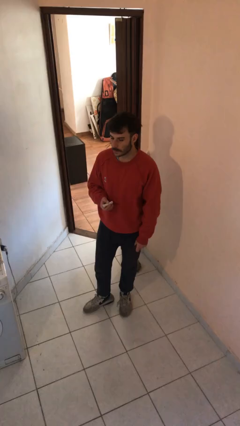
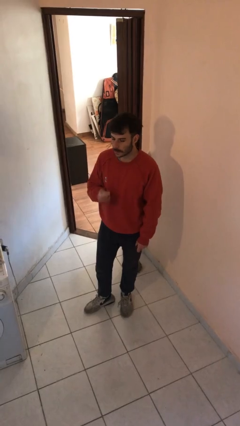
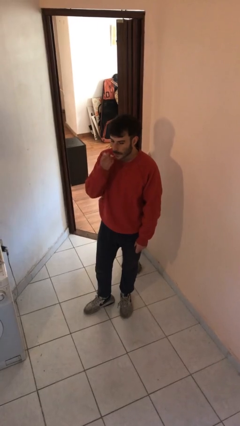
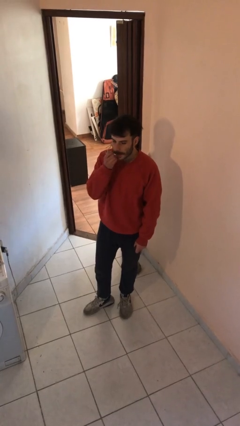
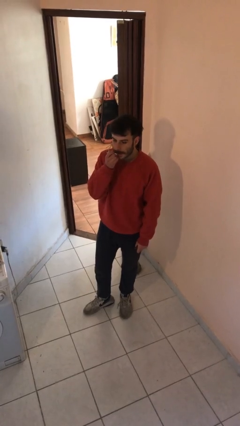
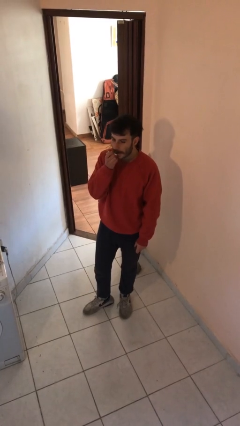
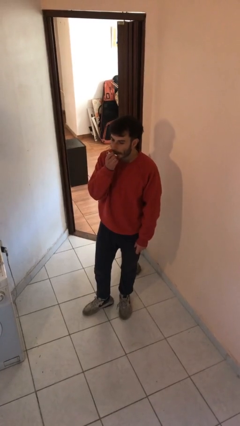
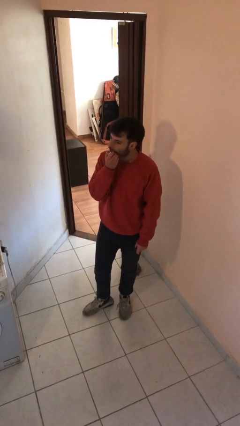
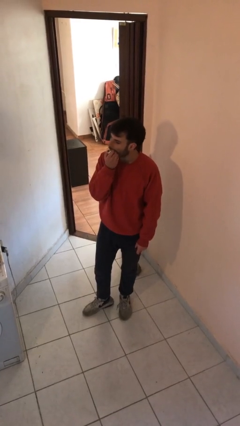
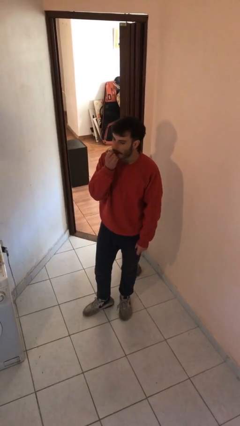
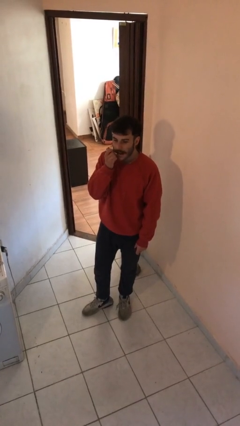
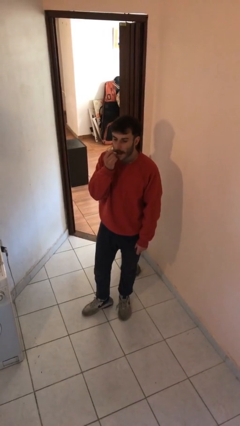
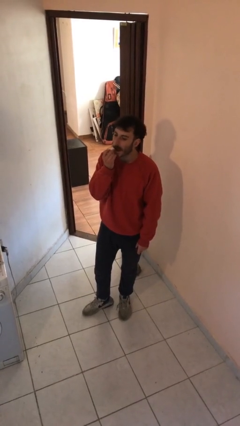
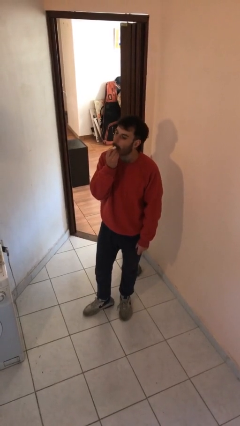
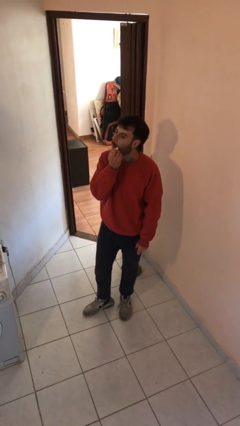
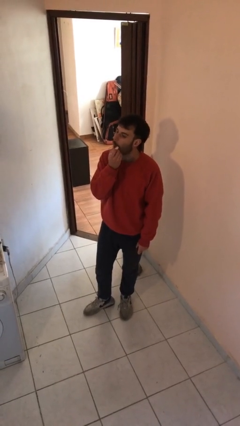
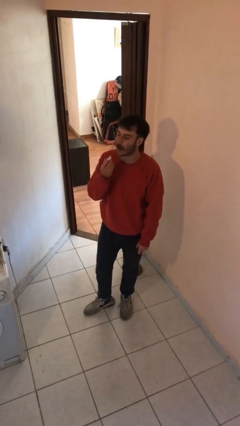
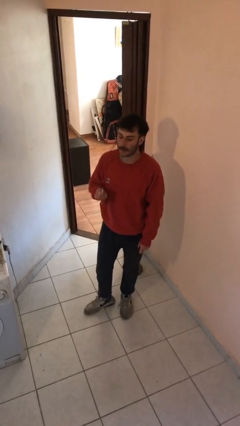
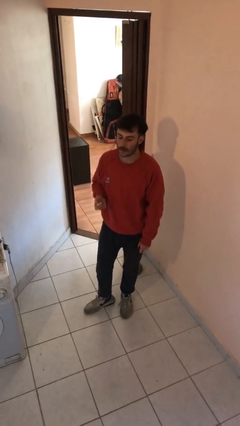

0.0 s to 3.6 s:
person applies lip makeup

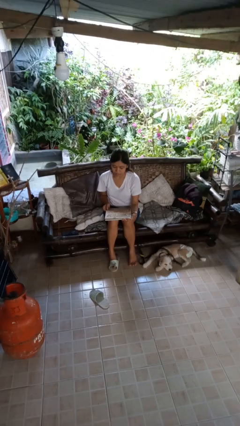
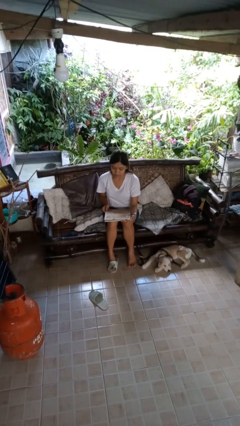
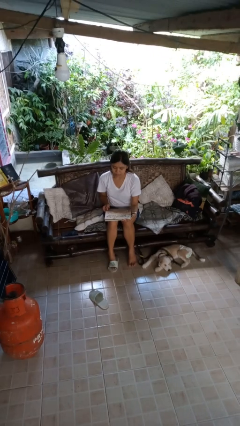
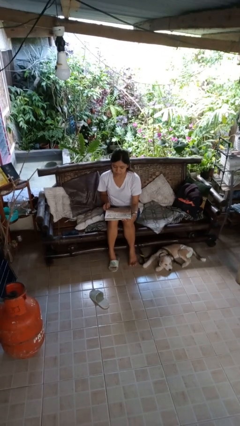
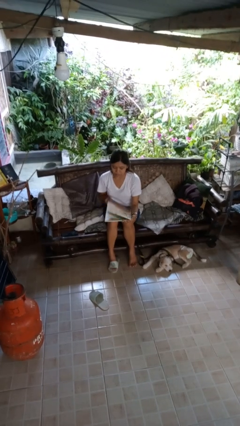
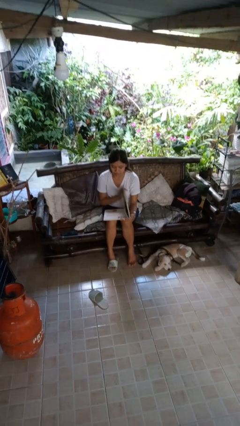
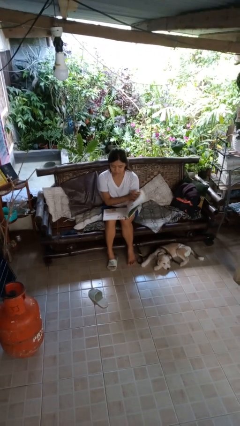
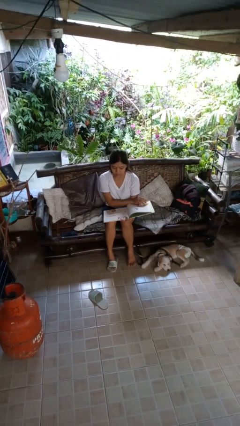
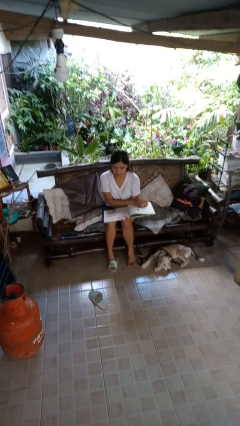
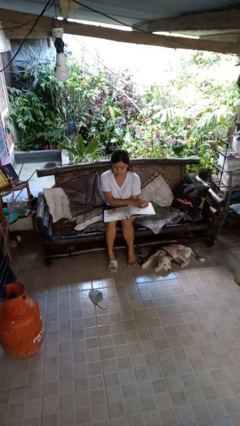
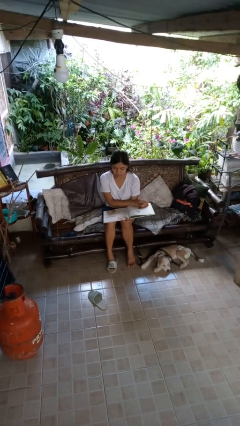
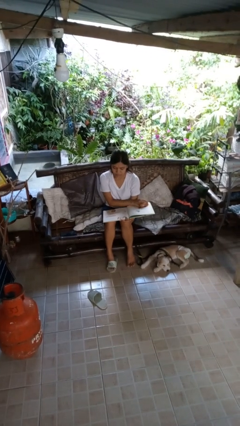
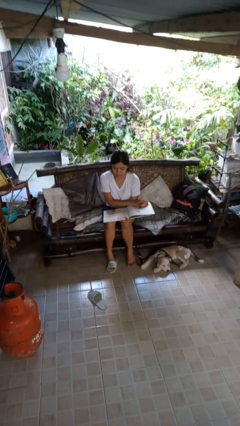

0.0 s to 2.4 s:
person reads book

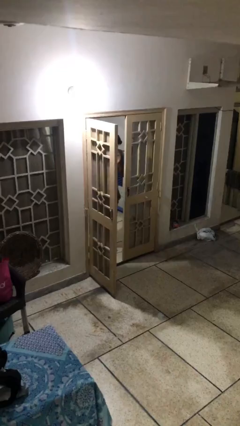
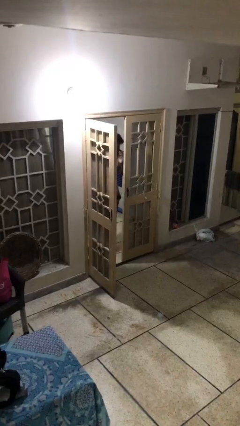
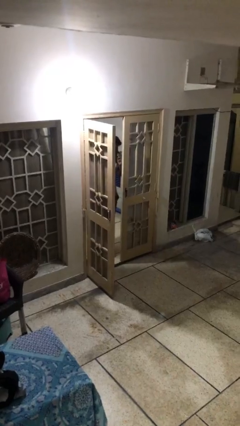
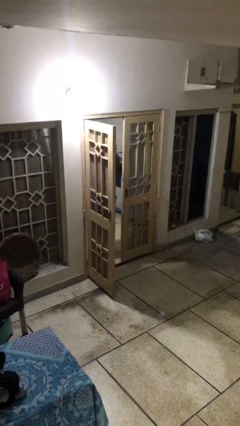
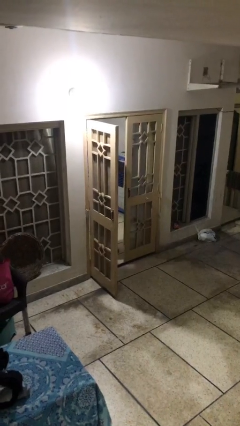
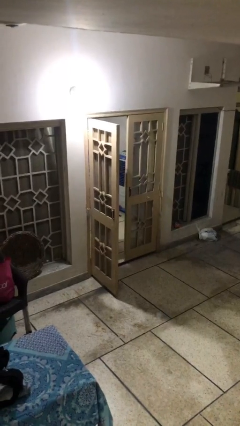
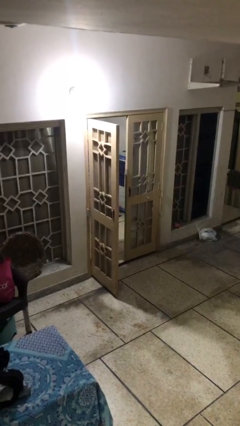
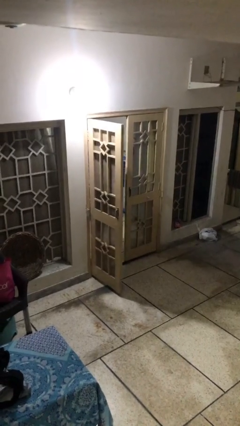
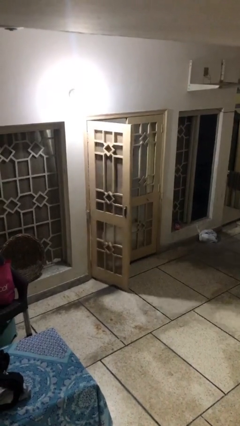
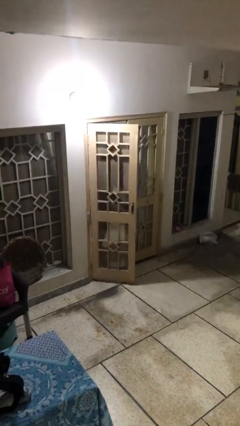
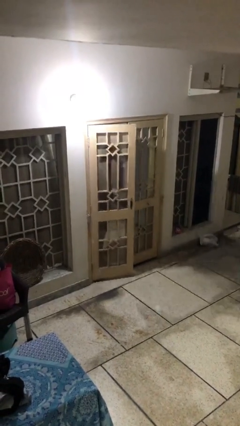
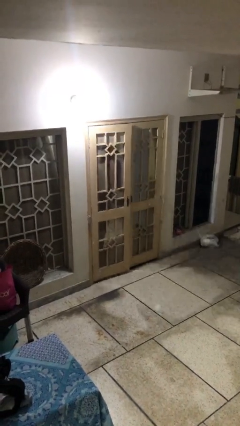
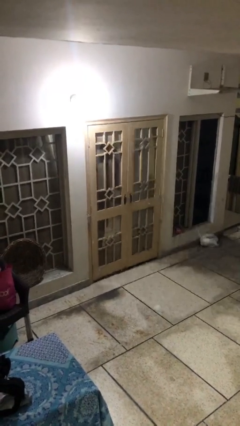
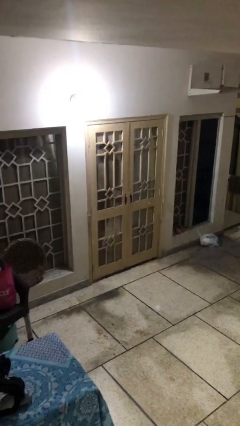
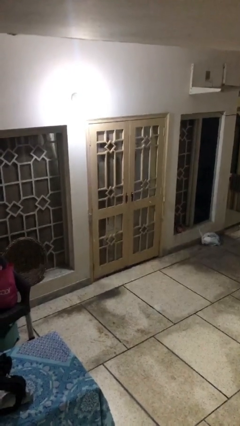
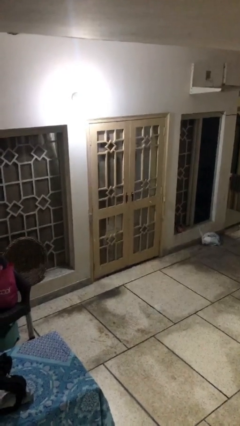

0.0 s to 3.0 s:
person closes facility door

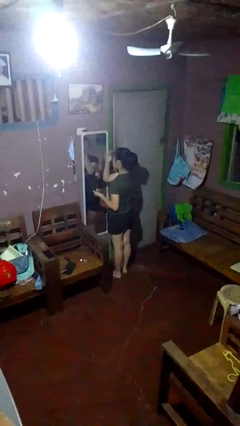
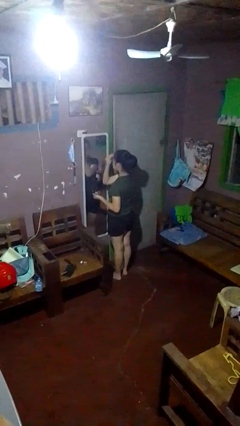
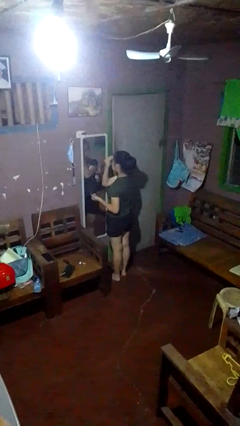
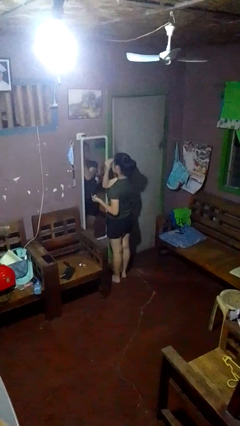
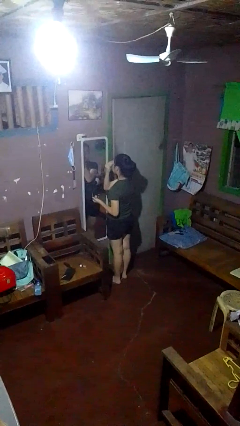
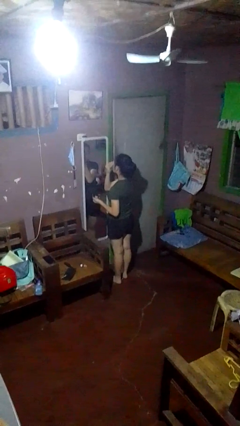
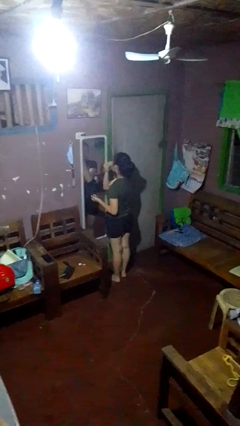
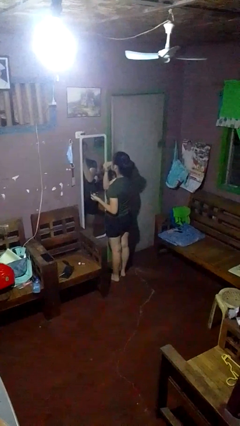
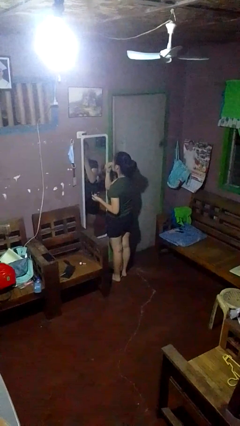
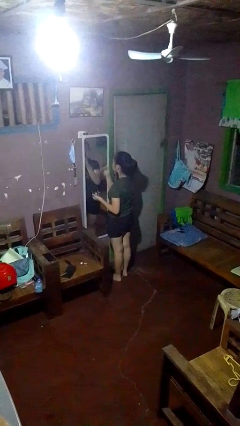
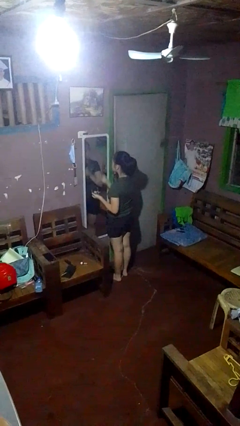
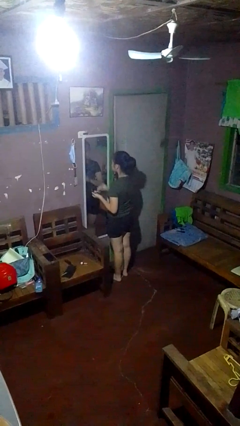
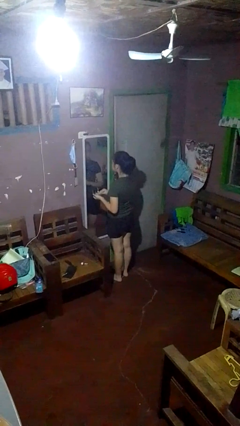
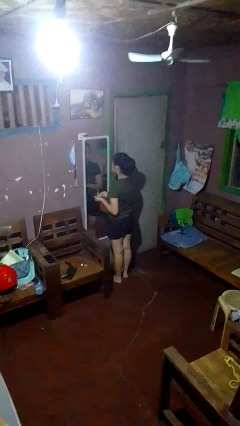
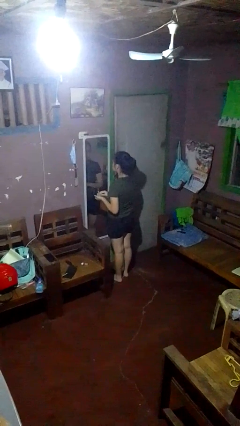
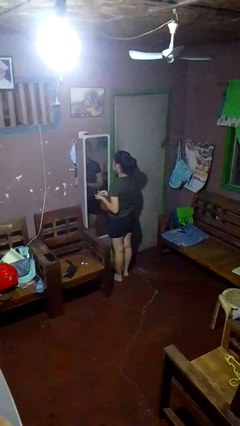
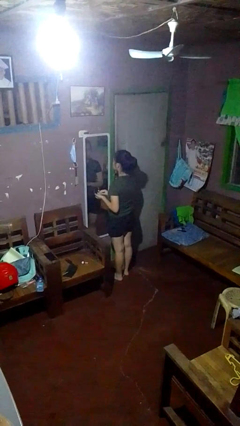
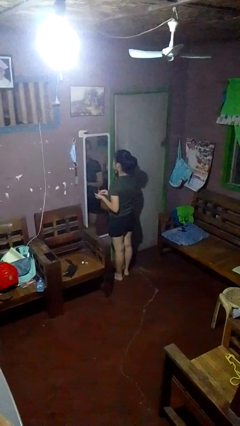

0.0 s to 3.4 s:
person applies foundation makeup

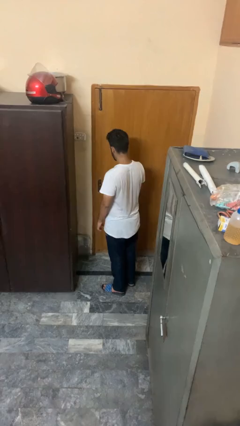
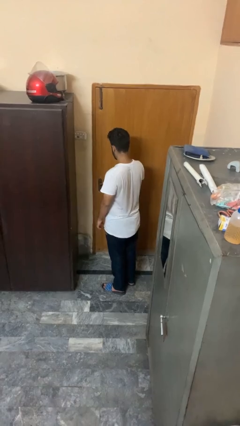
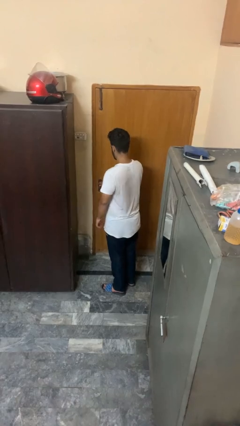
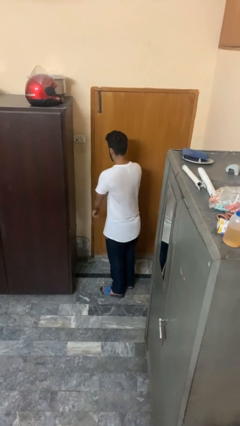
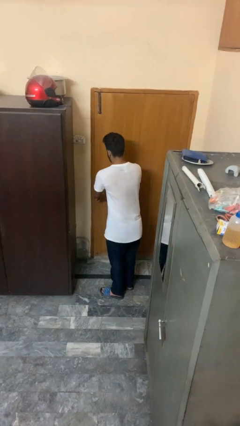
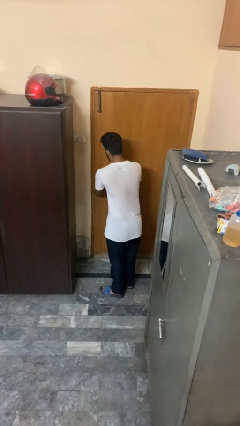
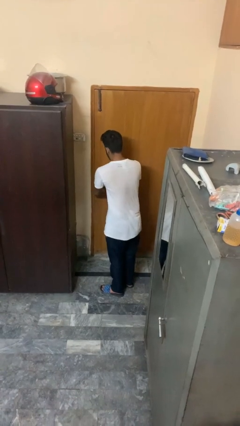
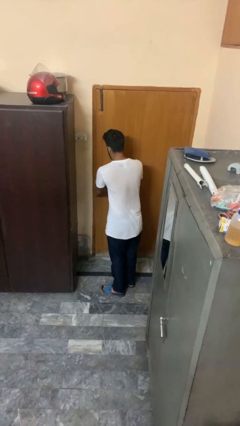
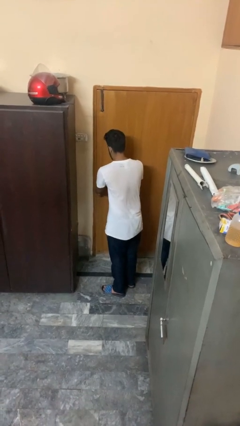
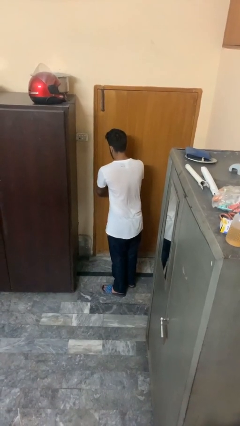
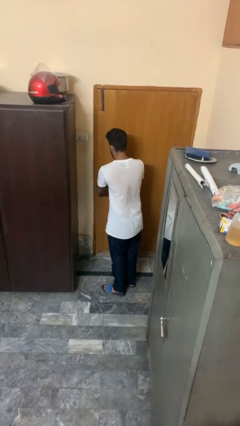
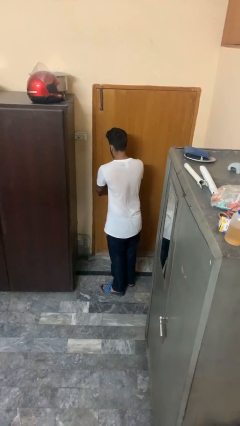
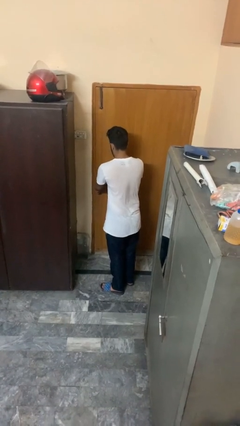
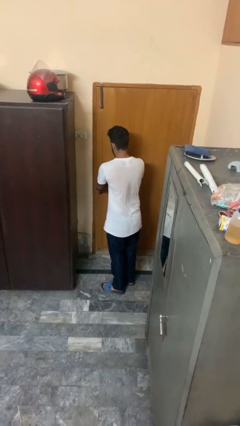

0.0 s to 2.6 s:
person unlocks door with keys

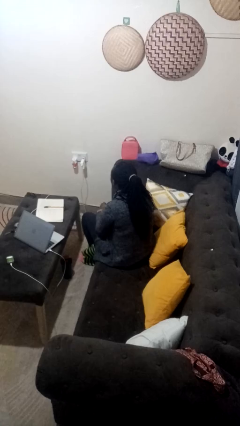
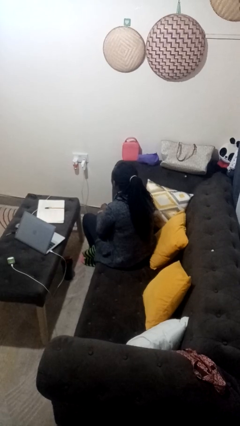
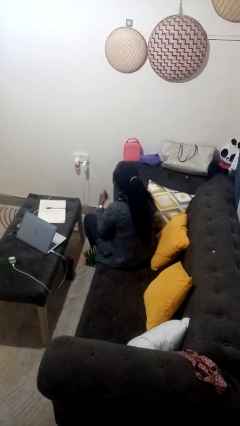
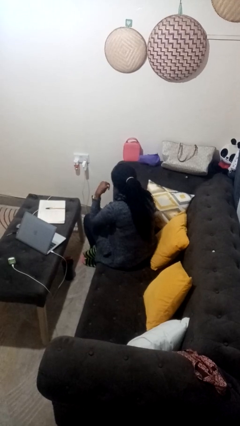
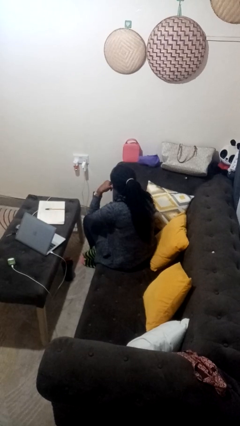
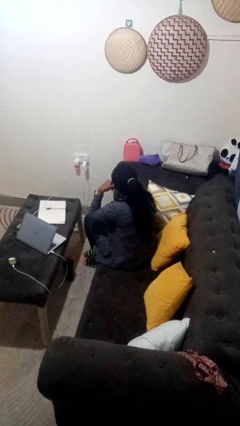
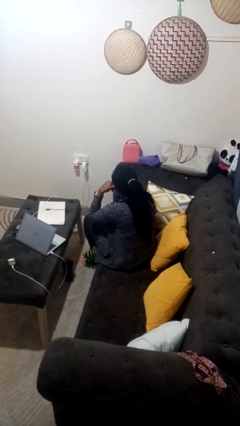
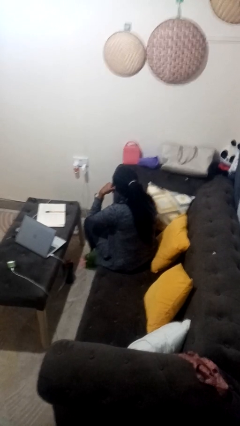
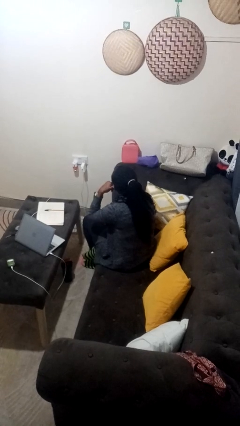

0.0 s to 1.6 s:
person gestures call me

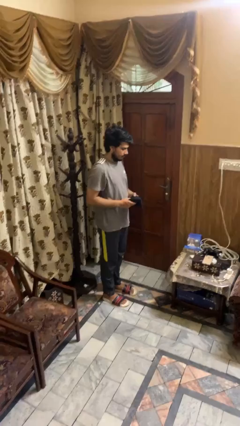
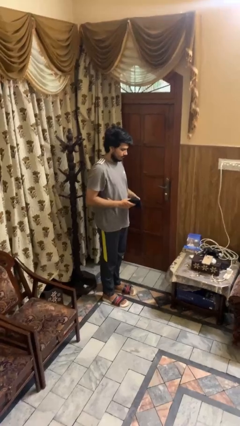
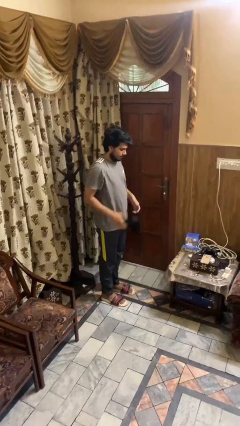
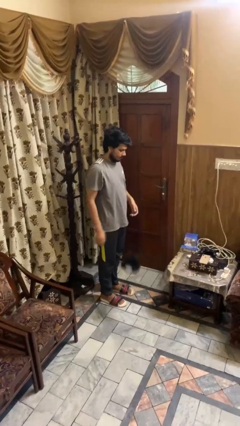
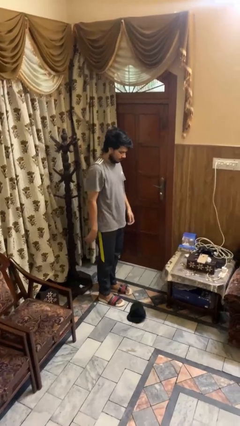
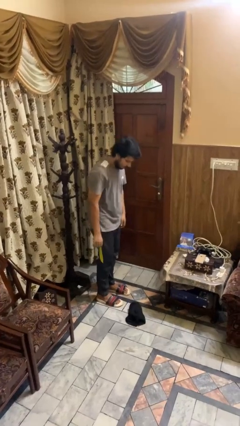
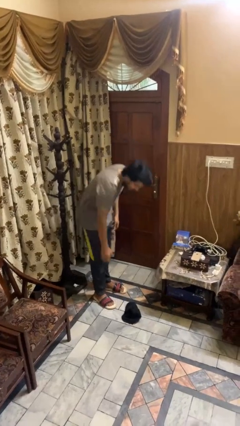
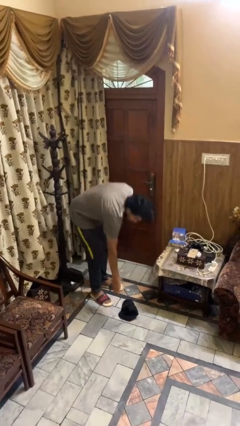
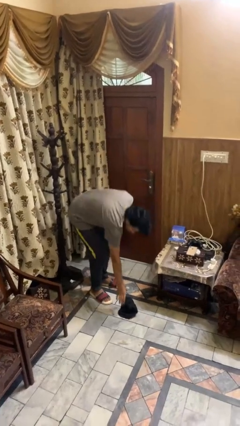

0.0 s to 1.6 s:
person drops object
